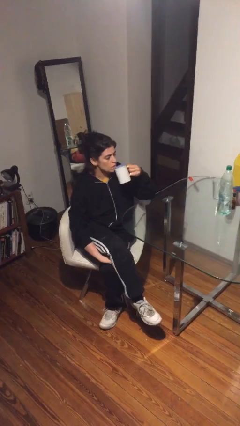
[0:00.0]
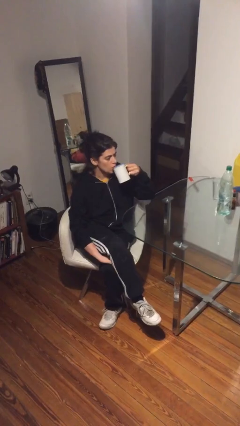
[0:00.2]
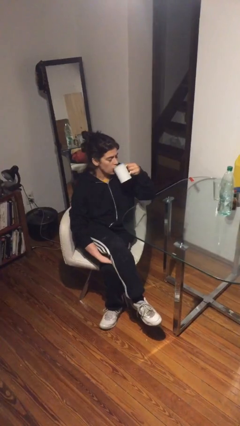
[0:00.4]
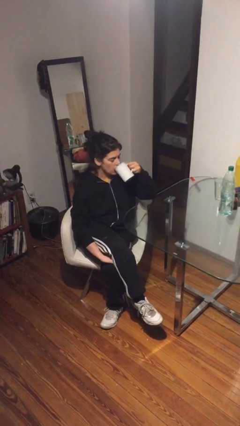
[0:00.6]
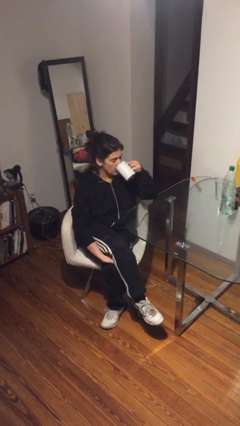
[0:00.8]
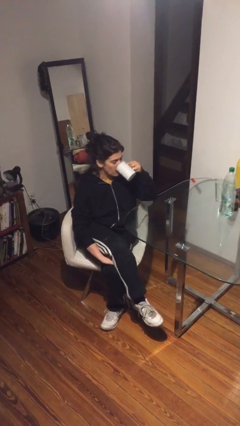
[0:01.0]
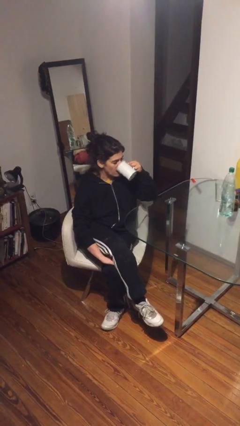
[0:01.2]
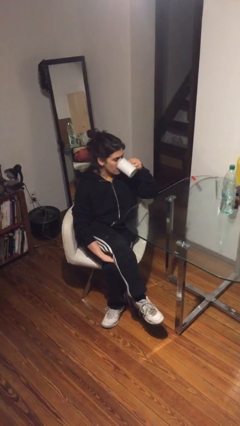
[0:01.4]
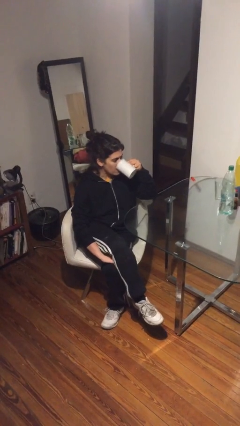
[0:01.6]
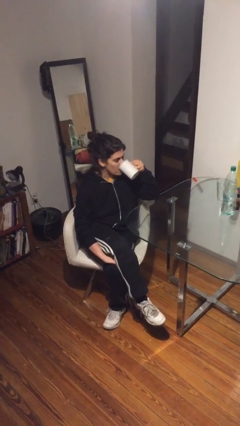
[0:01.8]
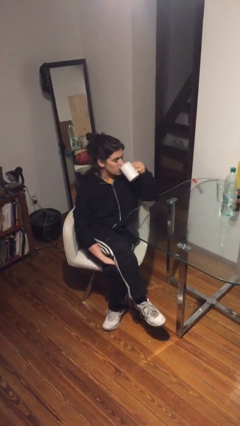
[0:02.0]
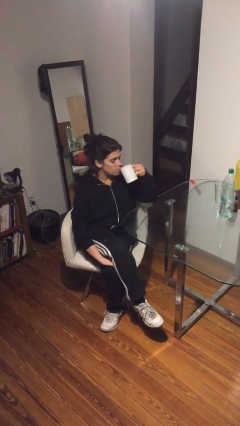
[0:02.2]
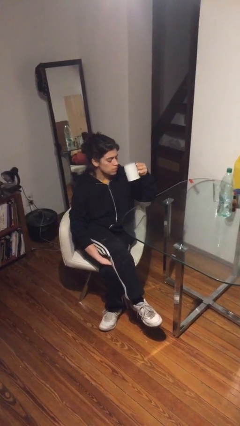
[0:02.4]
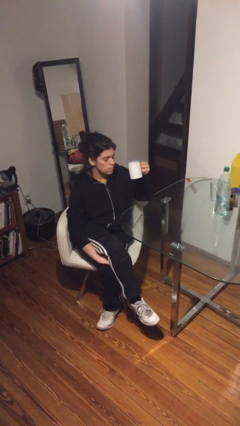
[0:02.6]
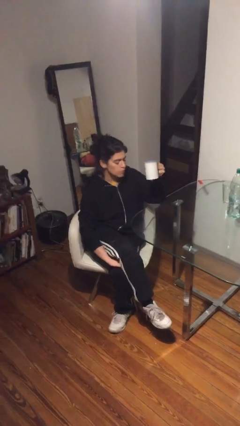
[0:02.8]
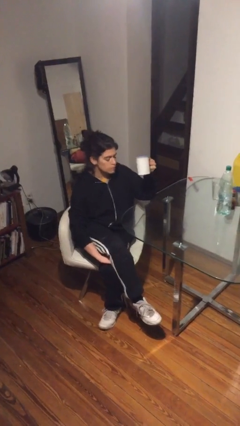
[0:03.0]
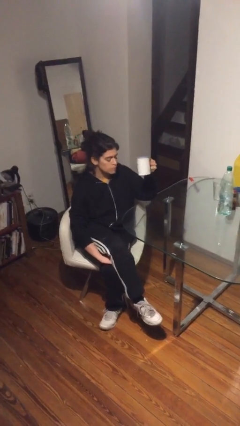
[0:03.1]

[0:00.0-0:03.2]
person drinks from mug

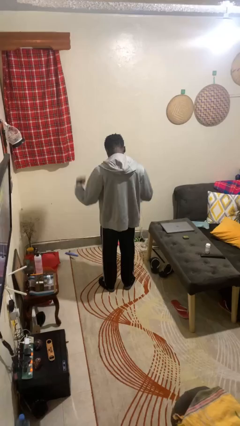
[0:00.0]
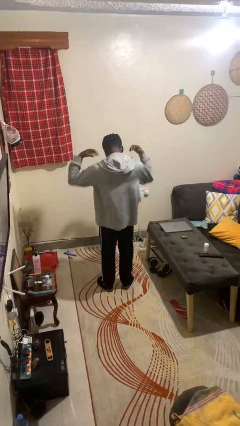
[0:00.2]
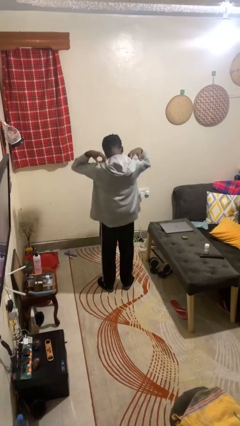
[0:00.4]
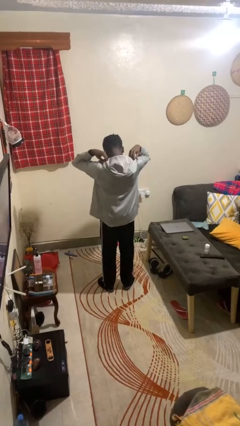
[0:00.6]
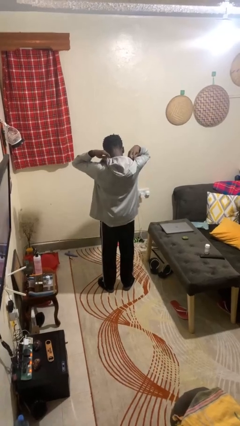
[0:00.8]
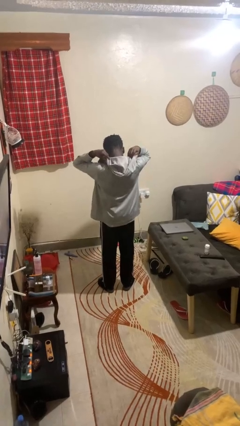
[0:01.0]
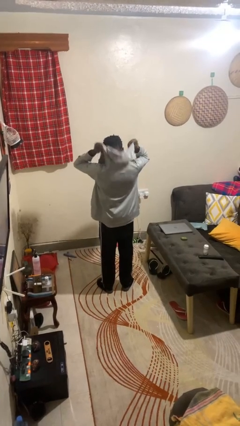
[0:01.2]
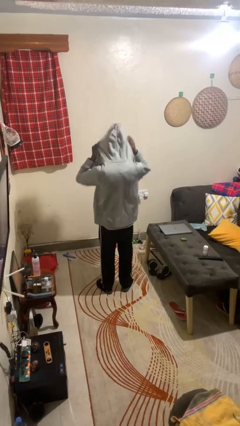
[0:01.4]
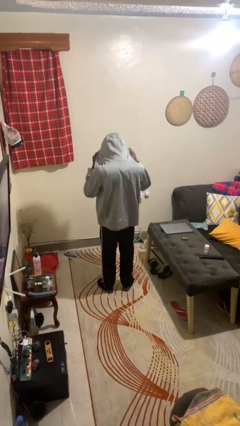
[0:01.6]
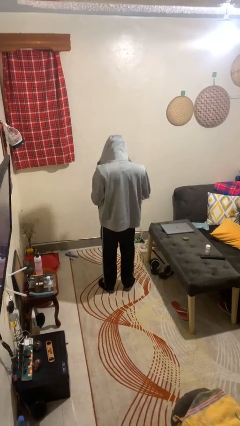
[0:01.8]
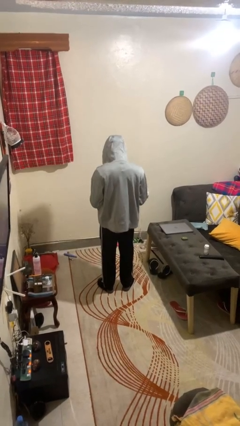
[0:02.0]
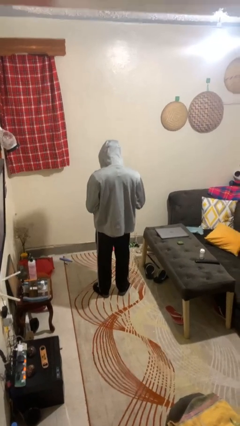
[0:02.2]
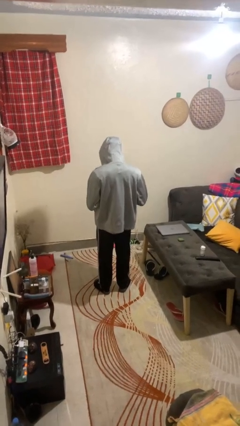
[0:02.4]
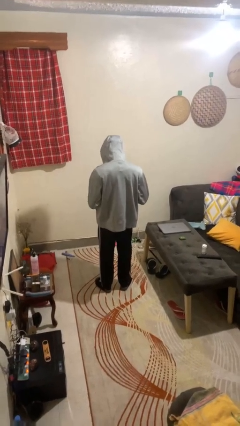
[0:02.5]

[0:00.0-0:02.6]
person puts on hoodie

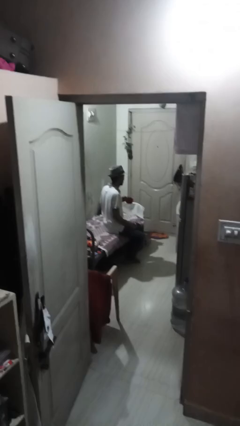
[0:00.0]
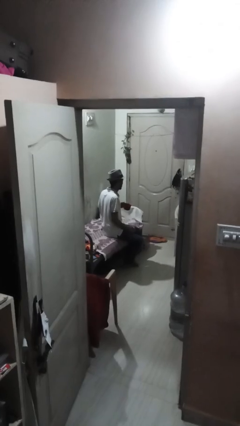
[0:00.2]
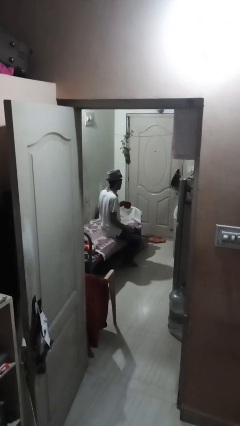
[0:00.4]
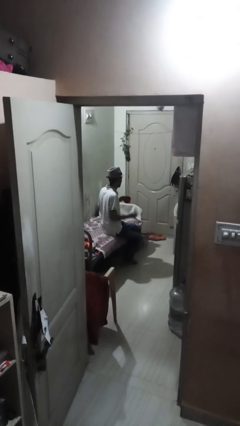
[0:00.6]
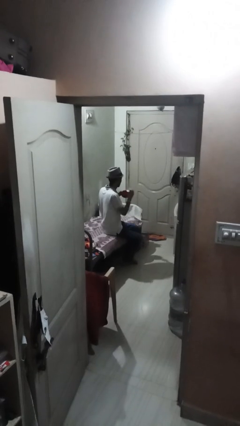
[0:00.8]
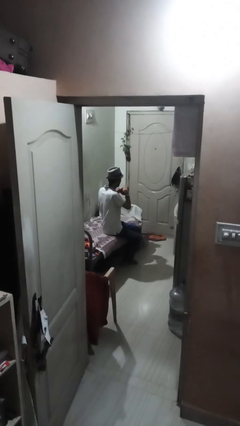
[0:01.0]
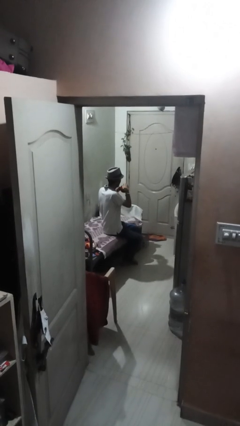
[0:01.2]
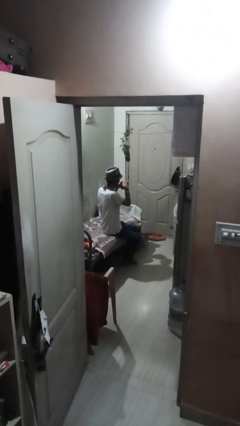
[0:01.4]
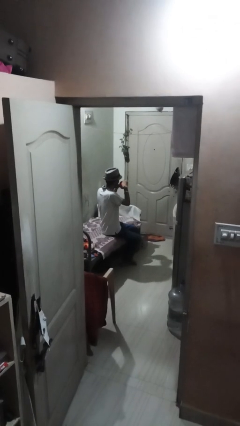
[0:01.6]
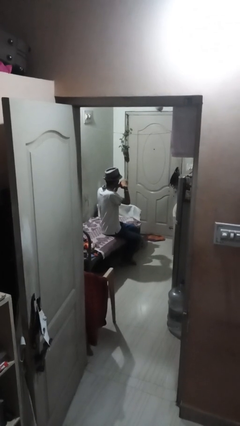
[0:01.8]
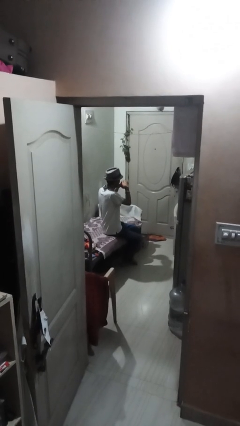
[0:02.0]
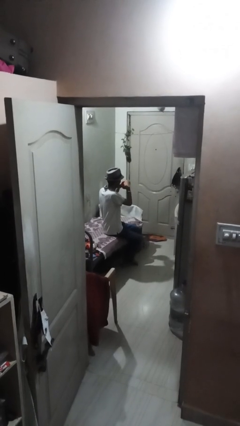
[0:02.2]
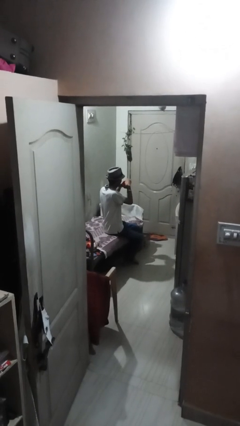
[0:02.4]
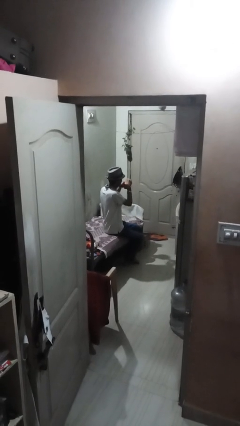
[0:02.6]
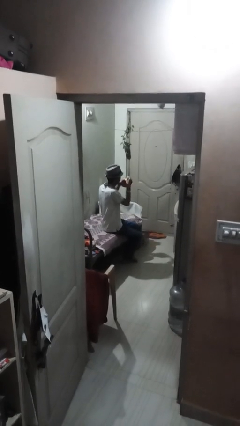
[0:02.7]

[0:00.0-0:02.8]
person stirs mug

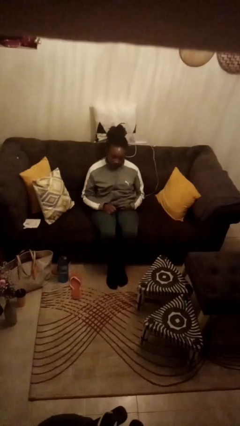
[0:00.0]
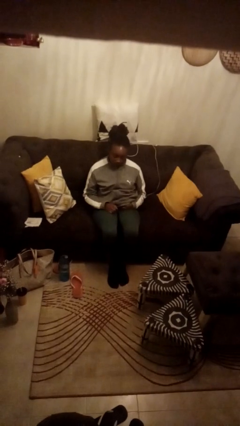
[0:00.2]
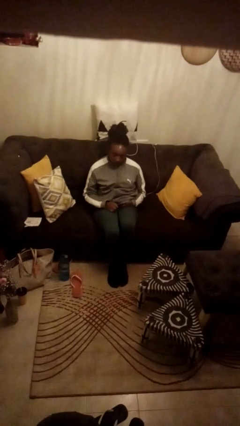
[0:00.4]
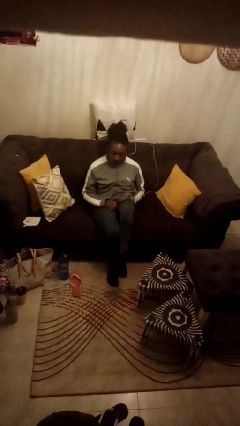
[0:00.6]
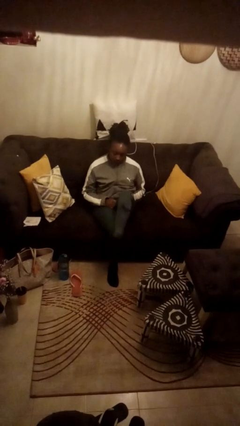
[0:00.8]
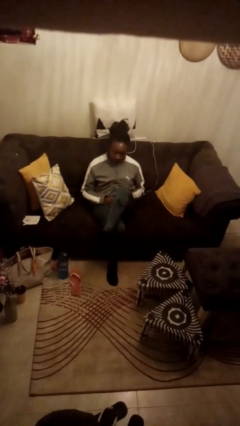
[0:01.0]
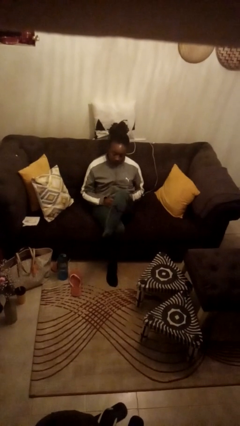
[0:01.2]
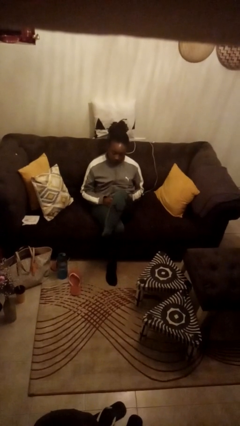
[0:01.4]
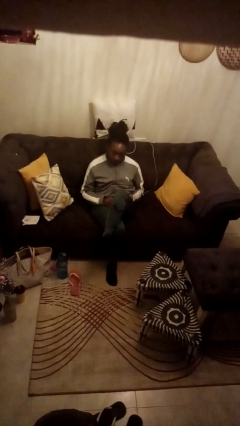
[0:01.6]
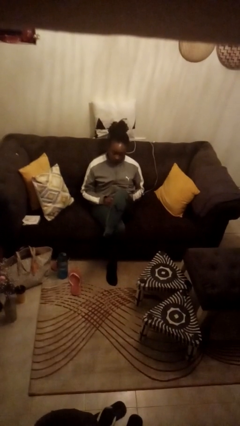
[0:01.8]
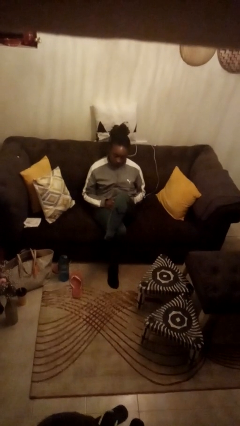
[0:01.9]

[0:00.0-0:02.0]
person crosses legs

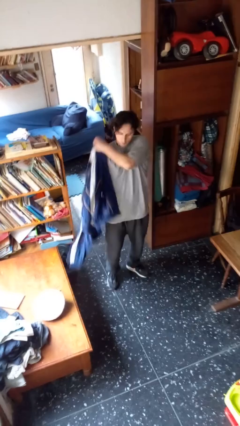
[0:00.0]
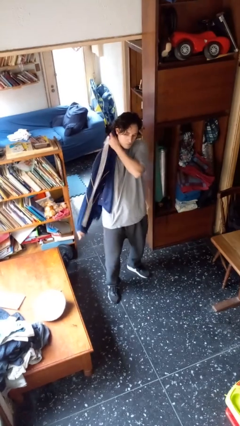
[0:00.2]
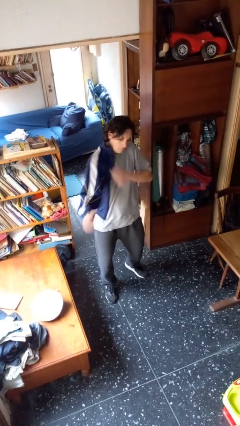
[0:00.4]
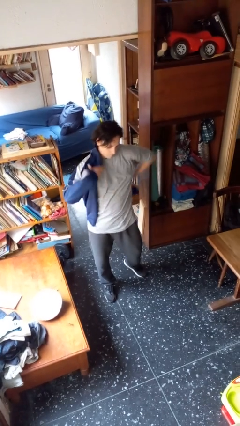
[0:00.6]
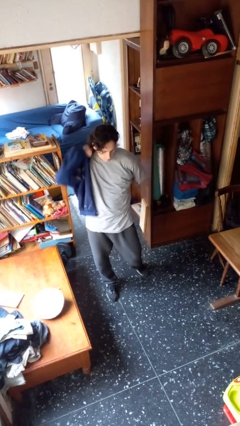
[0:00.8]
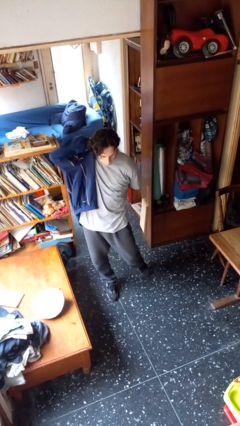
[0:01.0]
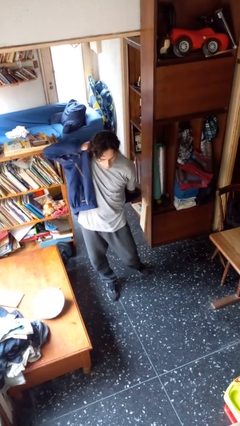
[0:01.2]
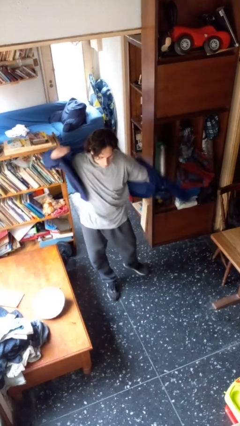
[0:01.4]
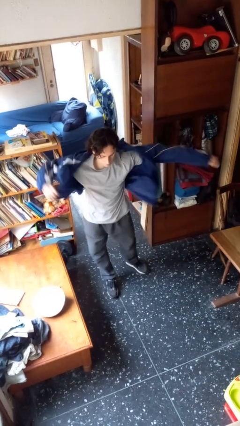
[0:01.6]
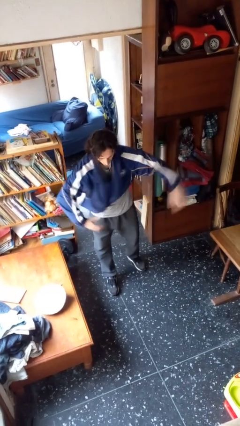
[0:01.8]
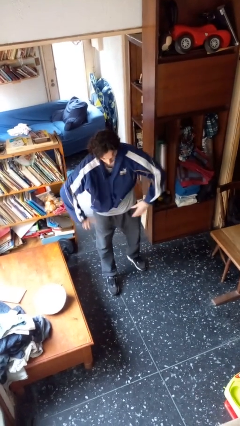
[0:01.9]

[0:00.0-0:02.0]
person puts on jacket

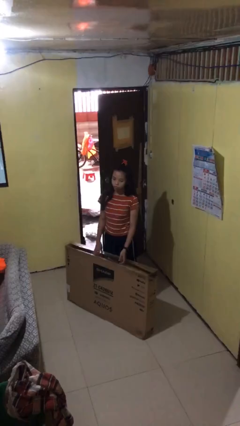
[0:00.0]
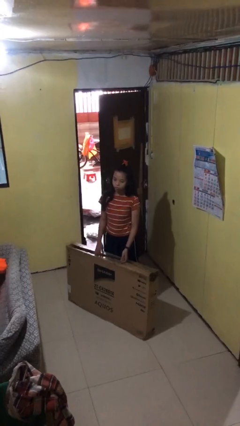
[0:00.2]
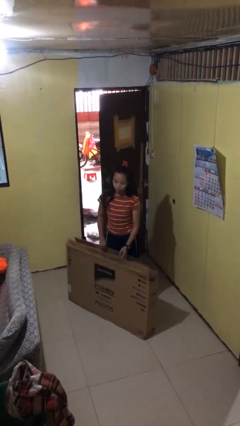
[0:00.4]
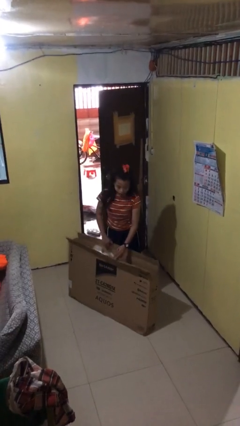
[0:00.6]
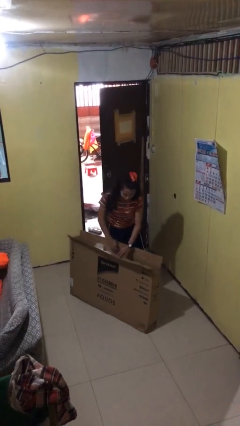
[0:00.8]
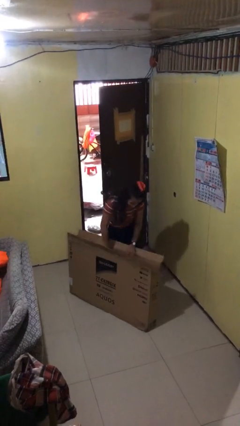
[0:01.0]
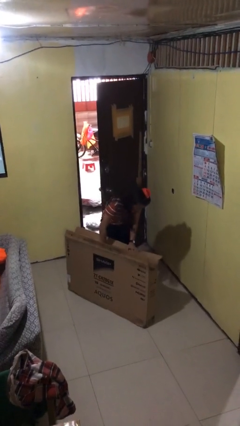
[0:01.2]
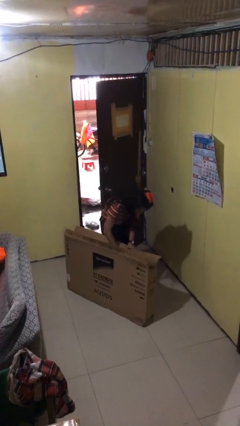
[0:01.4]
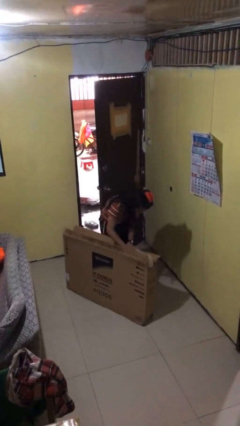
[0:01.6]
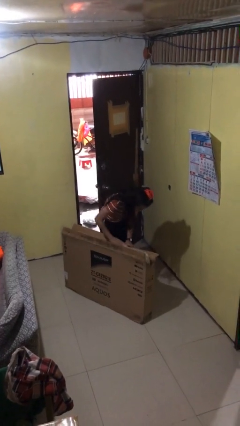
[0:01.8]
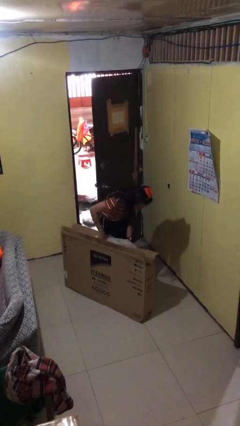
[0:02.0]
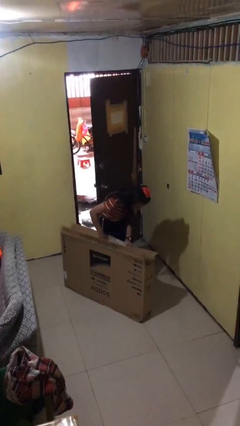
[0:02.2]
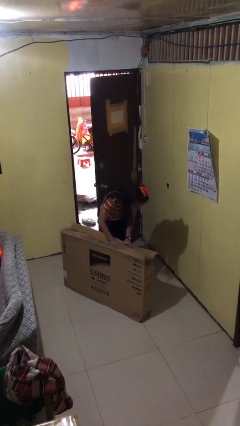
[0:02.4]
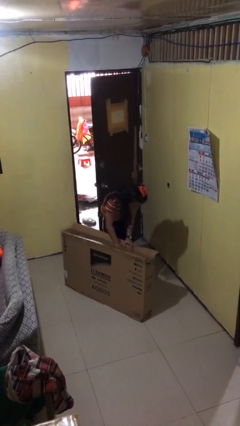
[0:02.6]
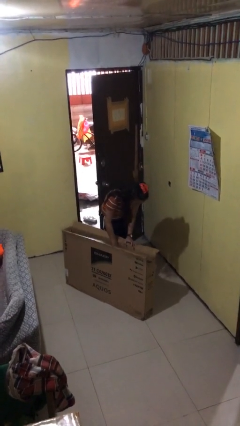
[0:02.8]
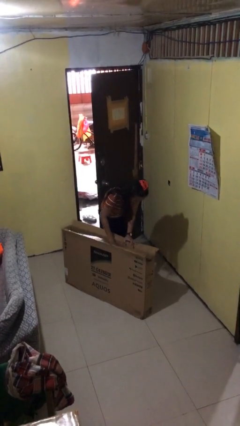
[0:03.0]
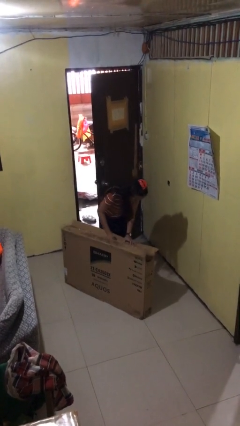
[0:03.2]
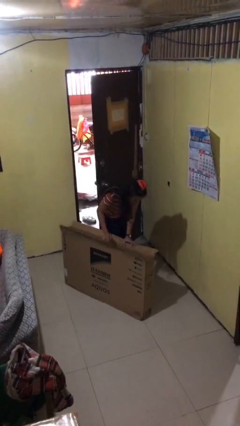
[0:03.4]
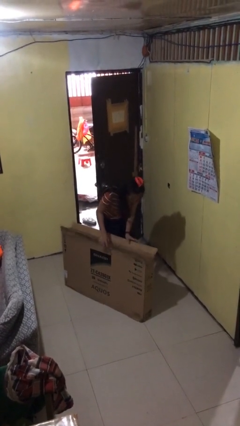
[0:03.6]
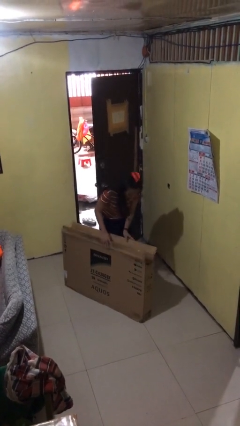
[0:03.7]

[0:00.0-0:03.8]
person searches in box

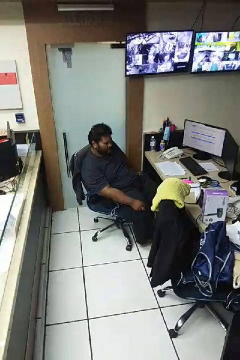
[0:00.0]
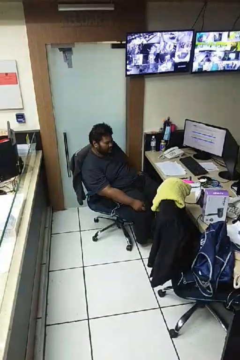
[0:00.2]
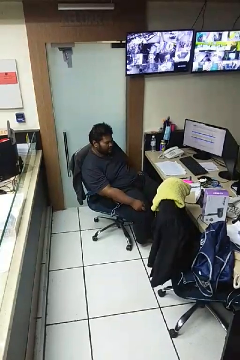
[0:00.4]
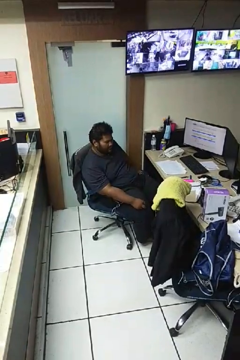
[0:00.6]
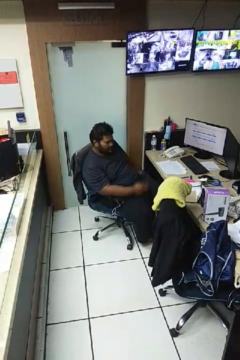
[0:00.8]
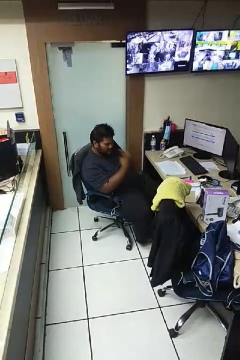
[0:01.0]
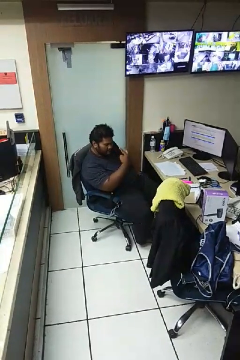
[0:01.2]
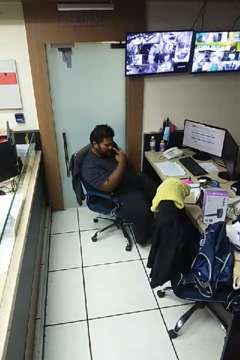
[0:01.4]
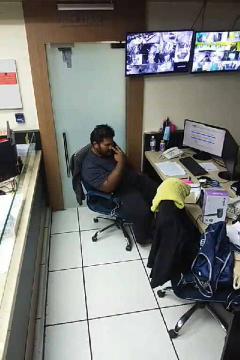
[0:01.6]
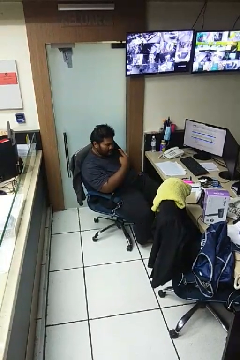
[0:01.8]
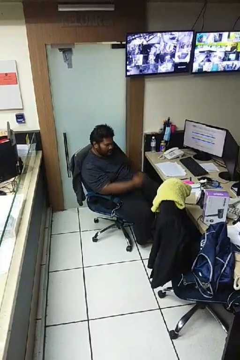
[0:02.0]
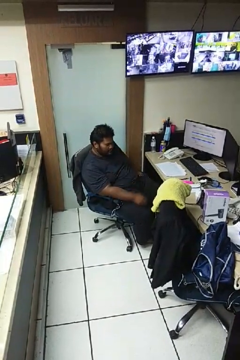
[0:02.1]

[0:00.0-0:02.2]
person gestures watch closely
